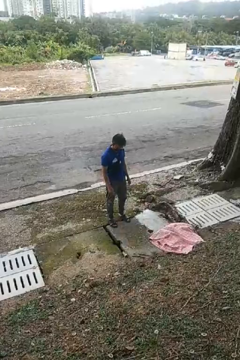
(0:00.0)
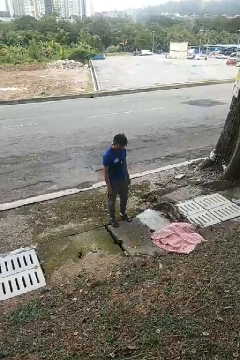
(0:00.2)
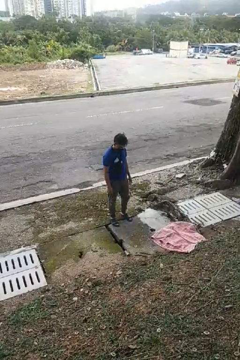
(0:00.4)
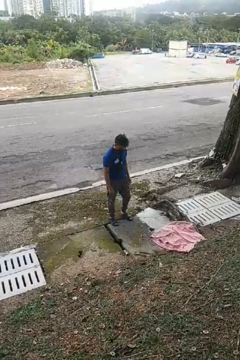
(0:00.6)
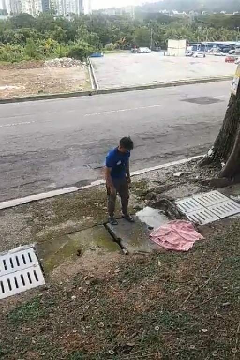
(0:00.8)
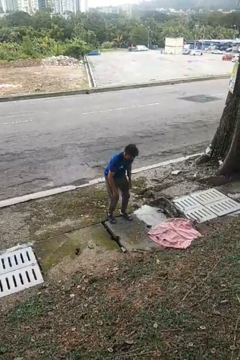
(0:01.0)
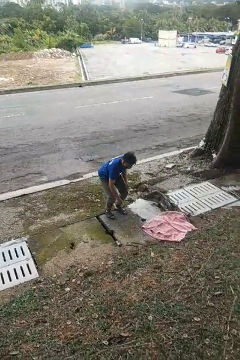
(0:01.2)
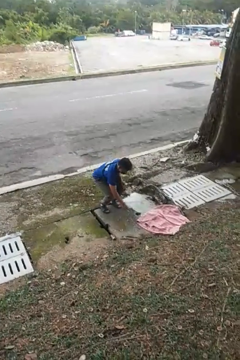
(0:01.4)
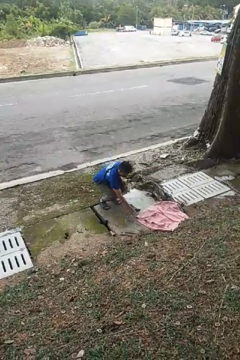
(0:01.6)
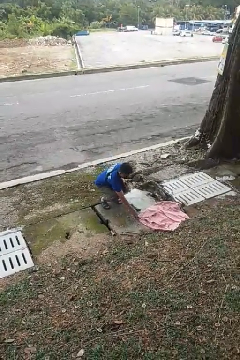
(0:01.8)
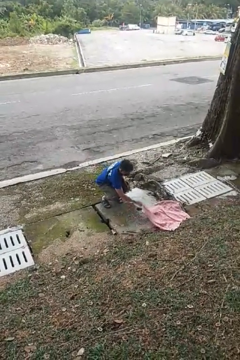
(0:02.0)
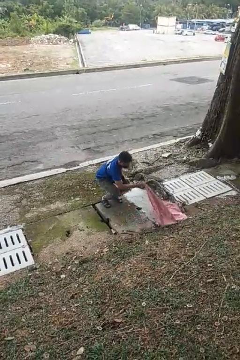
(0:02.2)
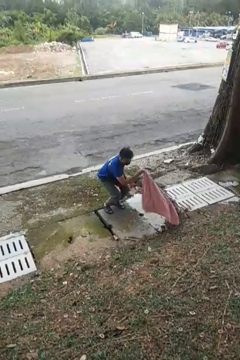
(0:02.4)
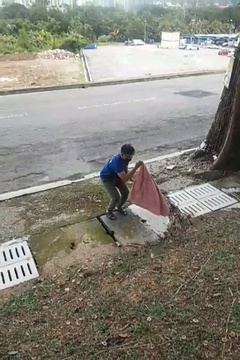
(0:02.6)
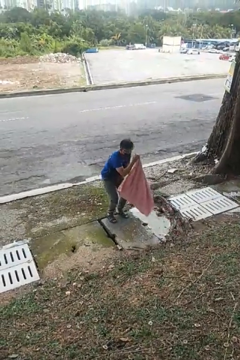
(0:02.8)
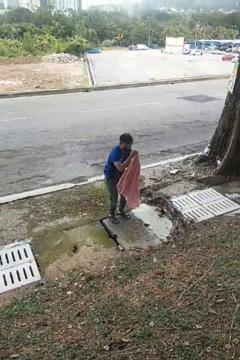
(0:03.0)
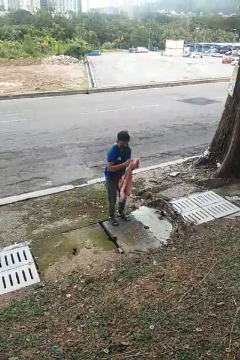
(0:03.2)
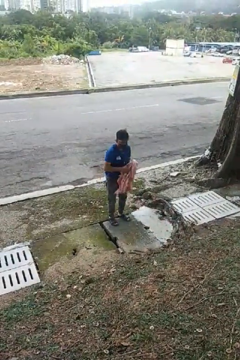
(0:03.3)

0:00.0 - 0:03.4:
person picks up object from floor

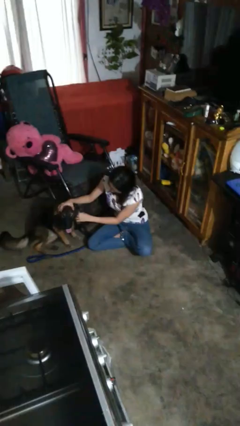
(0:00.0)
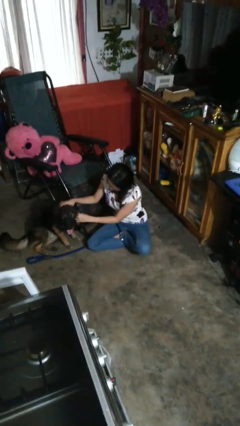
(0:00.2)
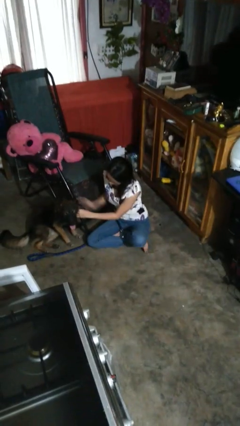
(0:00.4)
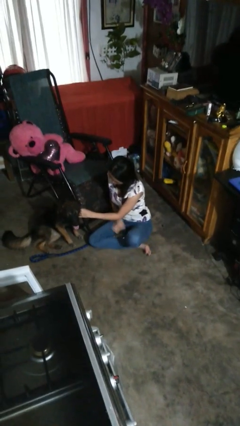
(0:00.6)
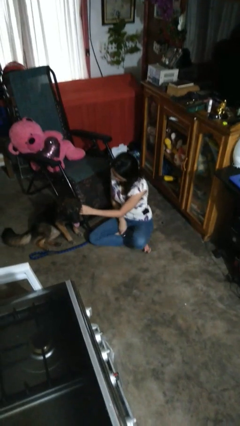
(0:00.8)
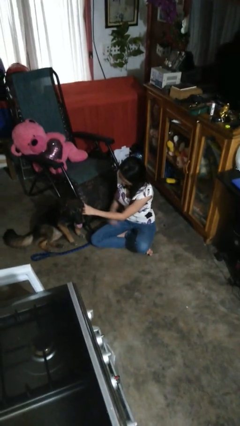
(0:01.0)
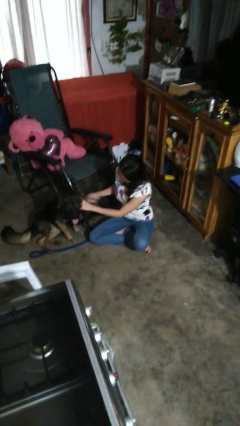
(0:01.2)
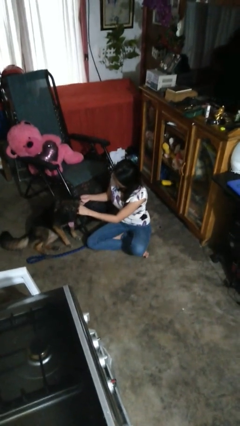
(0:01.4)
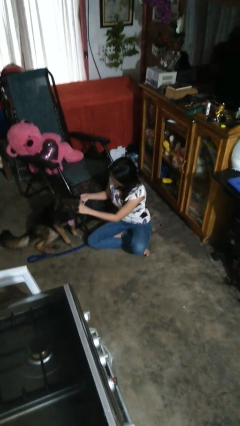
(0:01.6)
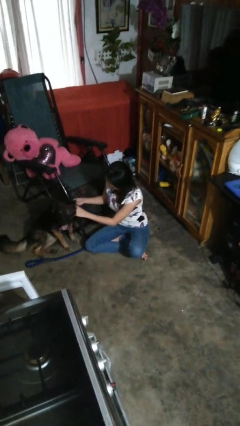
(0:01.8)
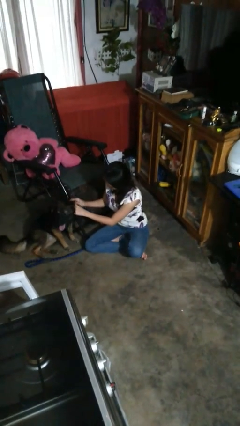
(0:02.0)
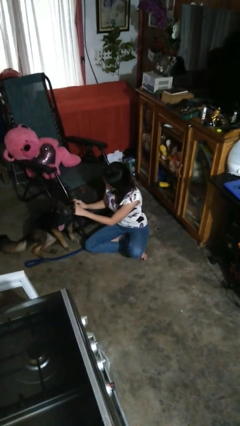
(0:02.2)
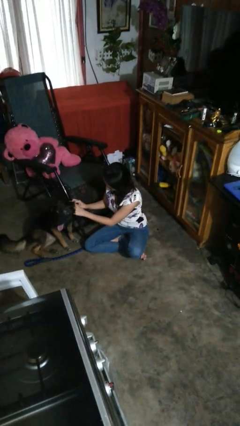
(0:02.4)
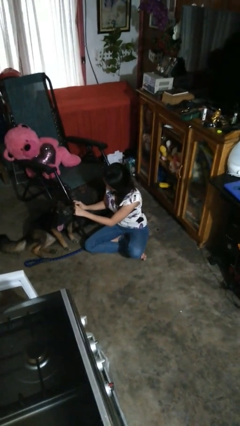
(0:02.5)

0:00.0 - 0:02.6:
person attaches leash to dog

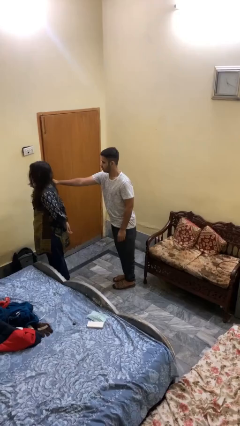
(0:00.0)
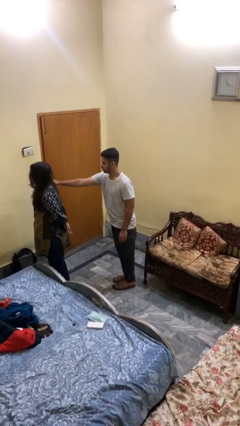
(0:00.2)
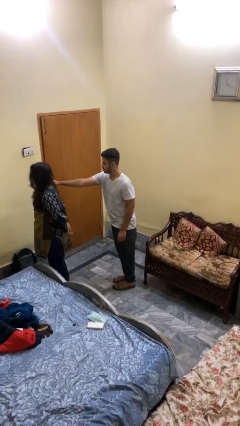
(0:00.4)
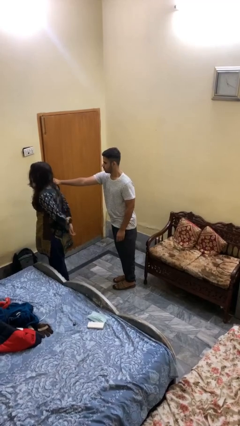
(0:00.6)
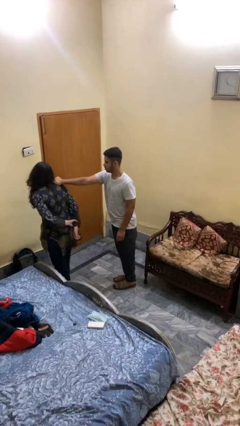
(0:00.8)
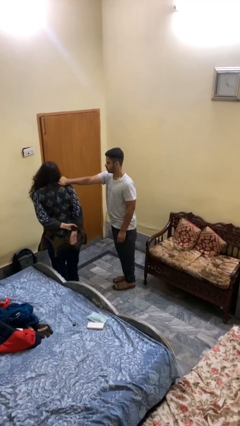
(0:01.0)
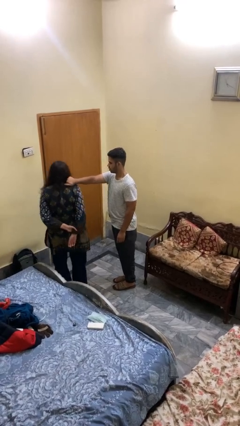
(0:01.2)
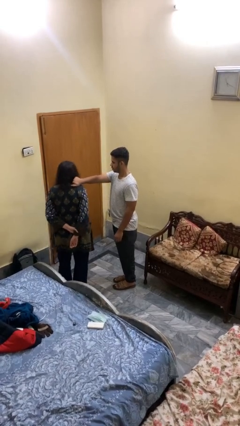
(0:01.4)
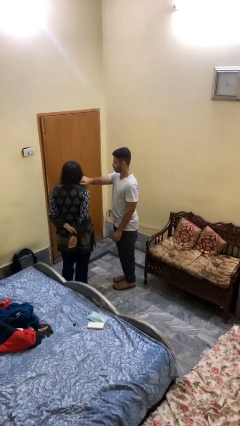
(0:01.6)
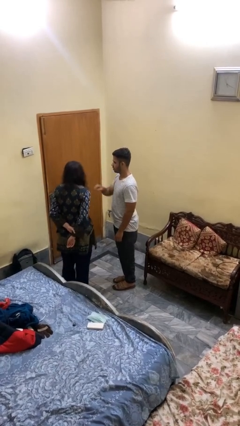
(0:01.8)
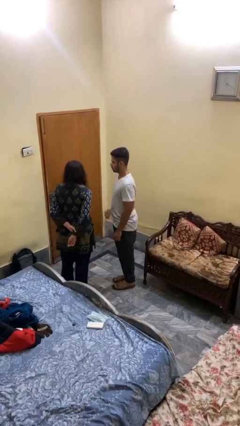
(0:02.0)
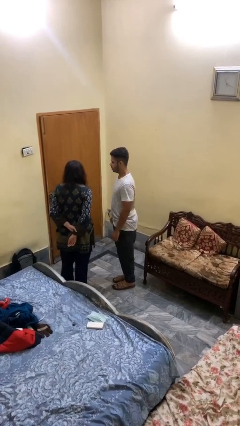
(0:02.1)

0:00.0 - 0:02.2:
person spins person around

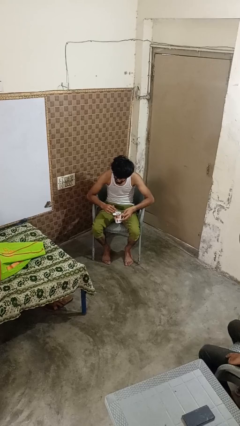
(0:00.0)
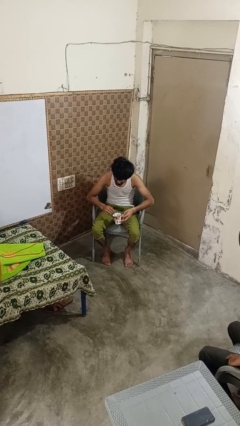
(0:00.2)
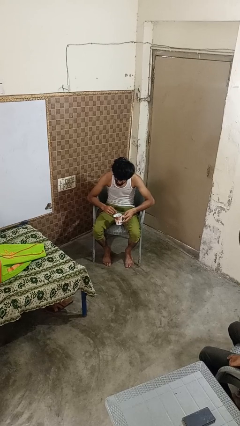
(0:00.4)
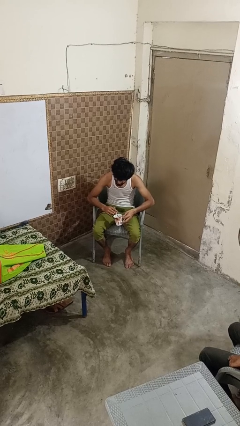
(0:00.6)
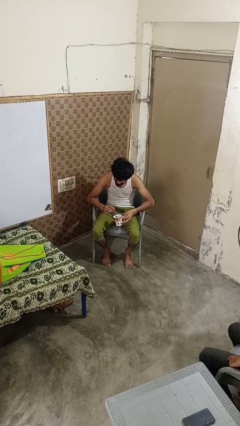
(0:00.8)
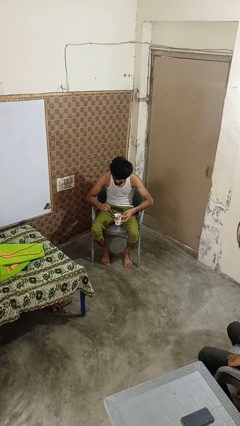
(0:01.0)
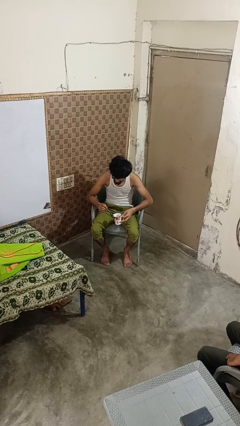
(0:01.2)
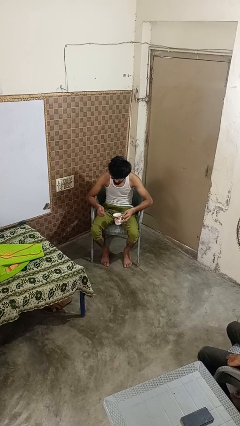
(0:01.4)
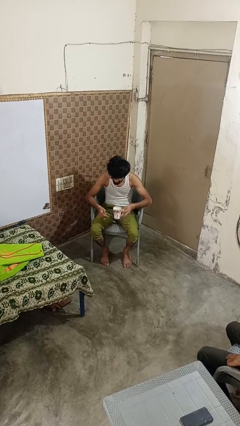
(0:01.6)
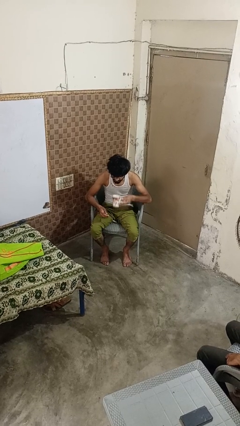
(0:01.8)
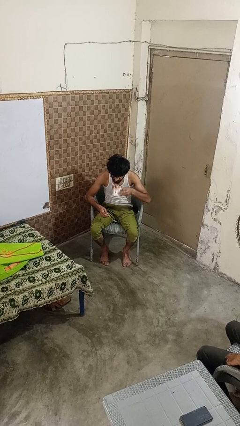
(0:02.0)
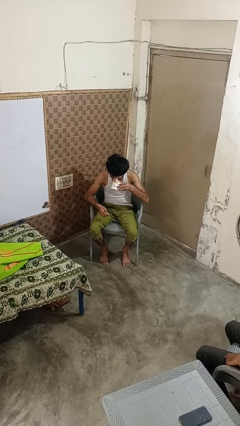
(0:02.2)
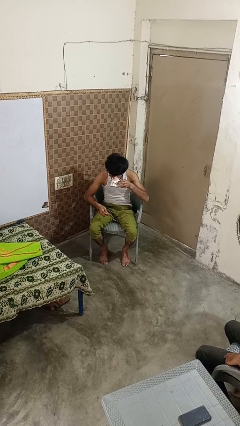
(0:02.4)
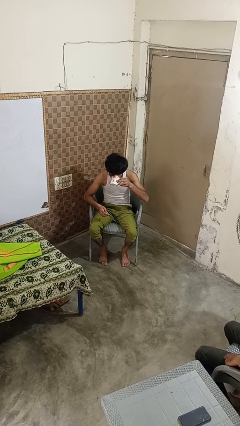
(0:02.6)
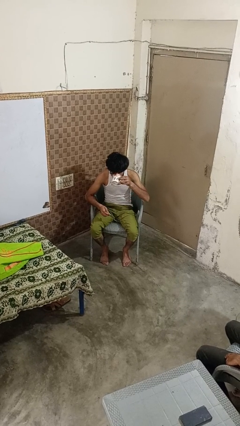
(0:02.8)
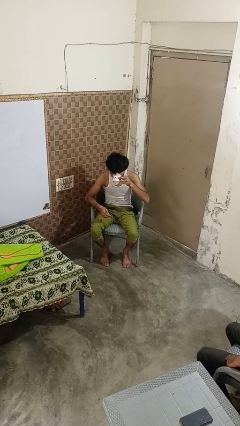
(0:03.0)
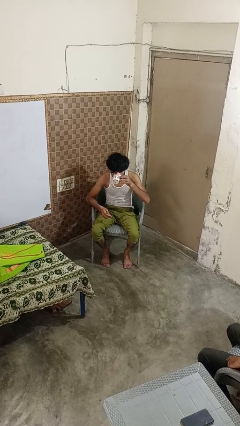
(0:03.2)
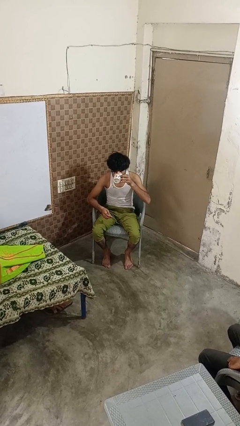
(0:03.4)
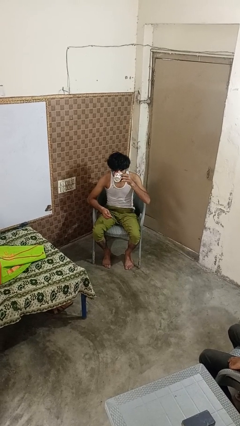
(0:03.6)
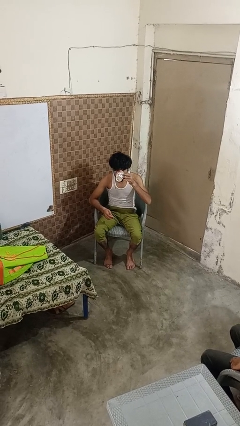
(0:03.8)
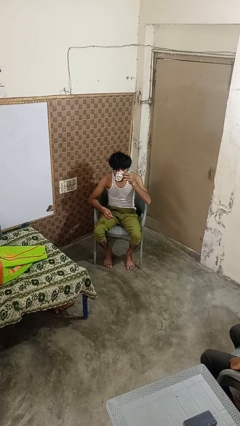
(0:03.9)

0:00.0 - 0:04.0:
person drinks from mug

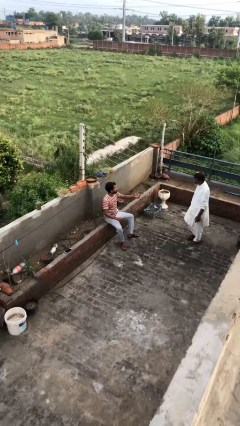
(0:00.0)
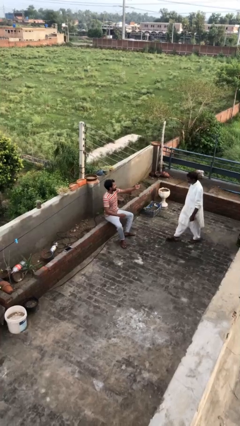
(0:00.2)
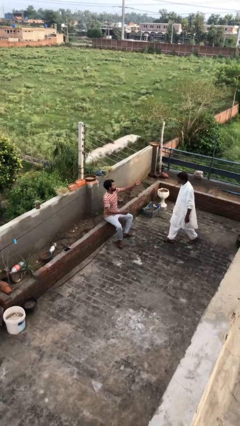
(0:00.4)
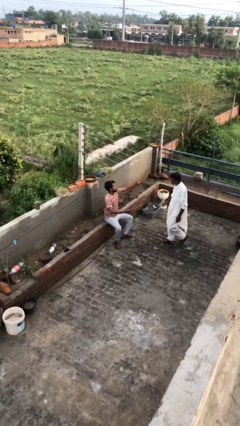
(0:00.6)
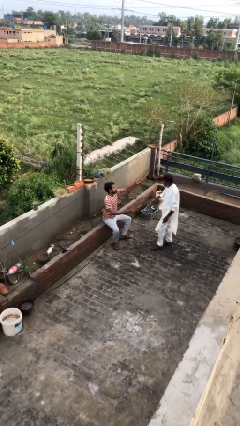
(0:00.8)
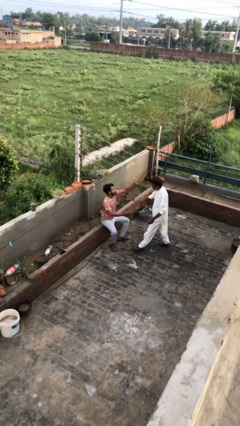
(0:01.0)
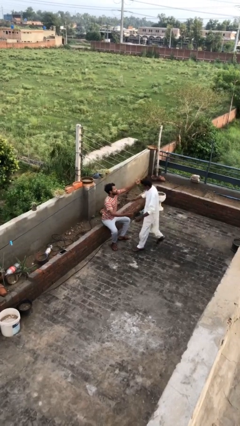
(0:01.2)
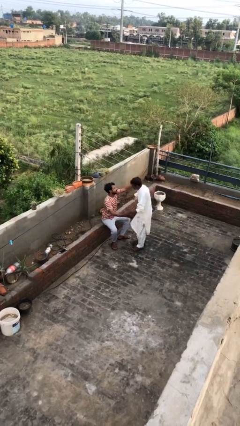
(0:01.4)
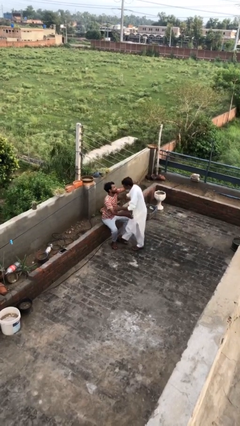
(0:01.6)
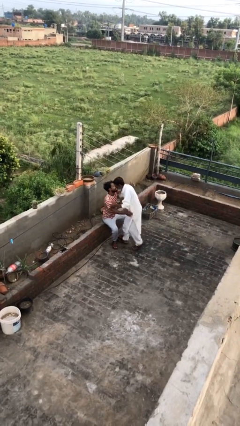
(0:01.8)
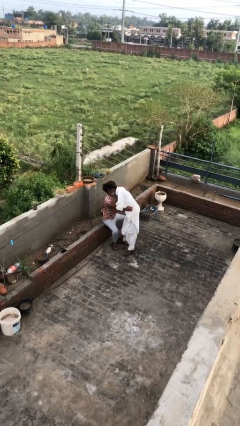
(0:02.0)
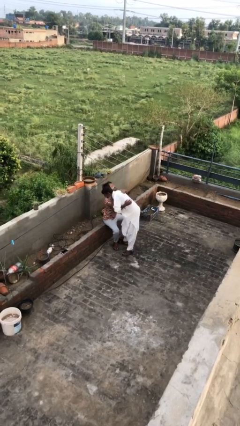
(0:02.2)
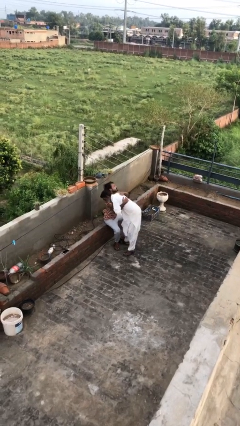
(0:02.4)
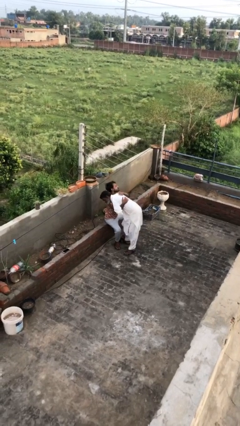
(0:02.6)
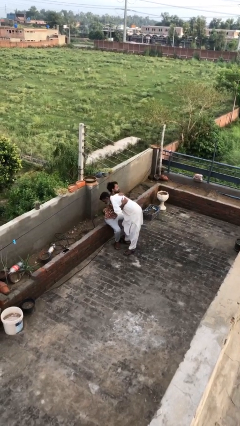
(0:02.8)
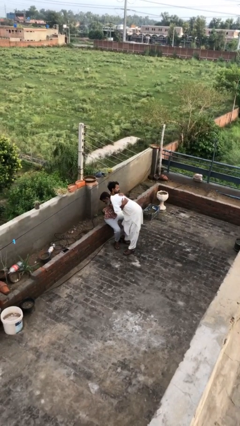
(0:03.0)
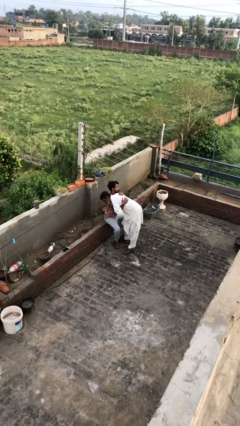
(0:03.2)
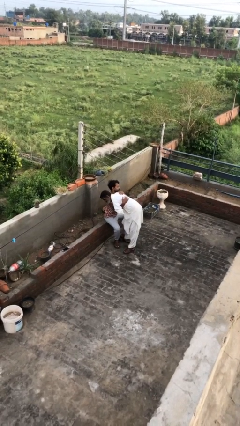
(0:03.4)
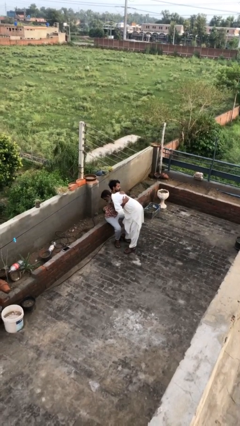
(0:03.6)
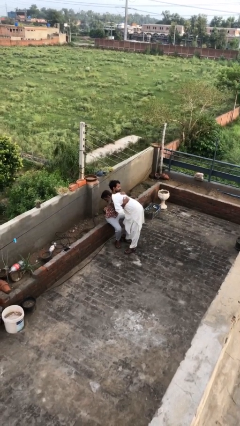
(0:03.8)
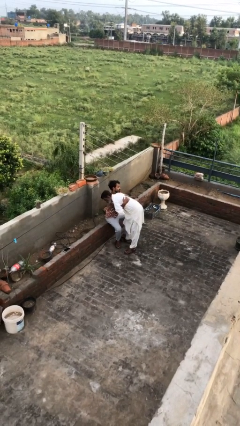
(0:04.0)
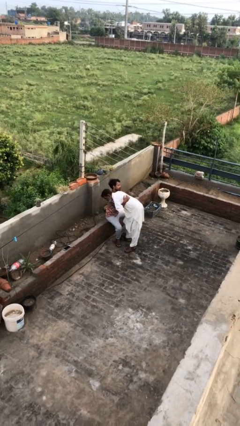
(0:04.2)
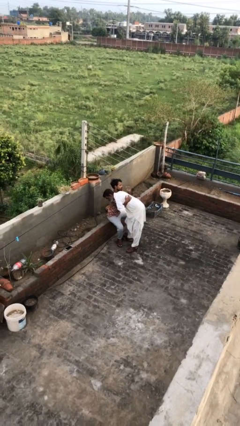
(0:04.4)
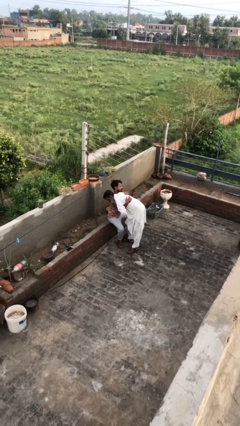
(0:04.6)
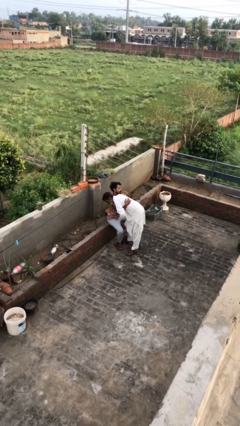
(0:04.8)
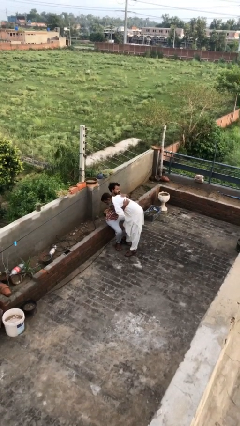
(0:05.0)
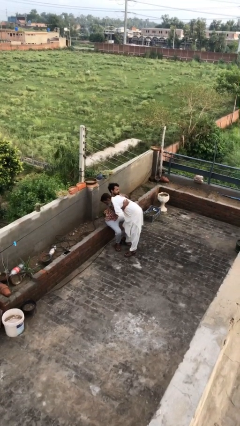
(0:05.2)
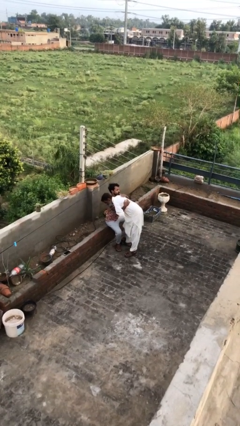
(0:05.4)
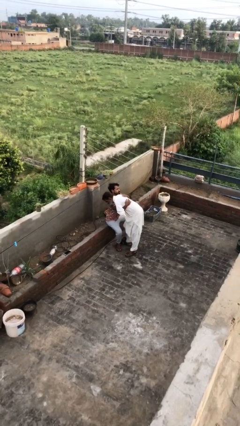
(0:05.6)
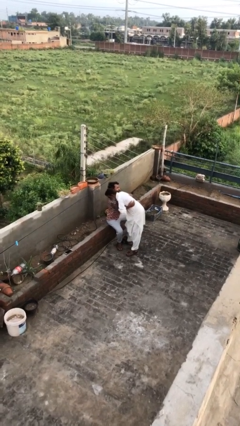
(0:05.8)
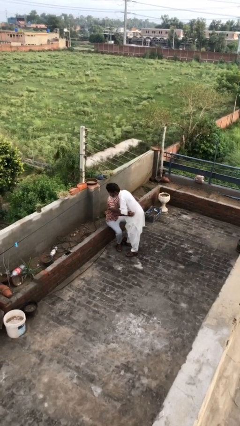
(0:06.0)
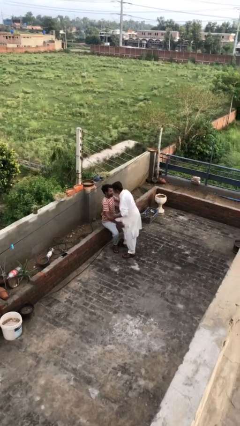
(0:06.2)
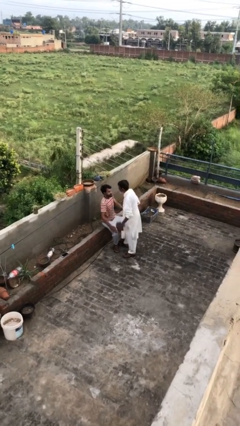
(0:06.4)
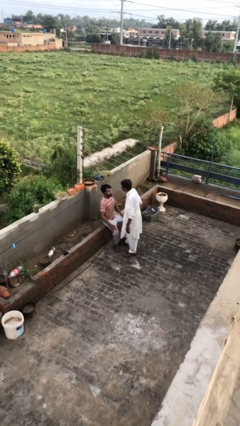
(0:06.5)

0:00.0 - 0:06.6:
person embraces person
